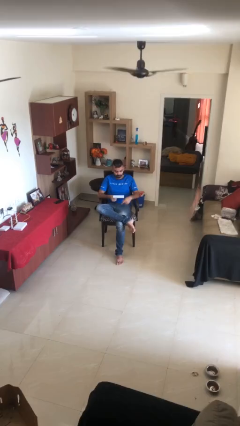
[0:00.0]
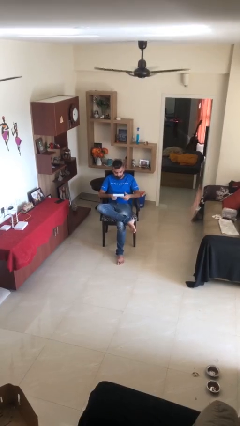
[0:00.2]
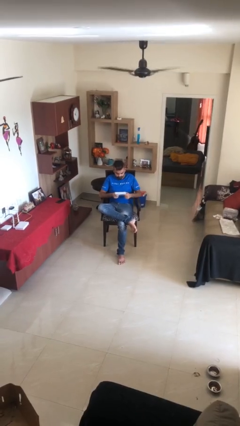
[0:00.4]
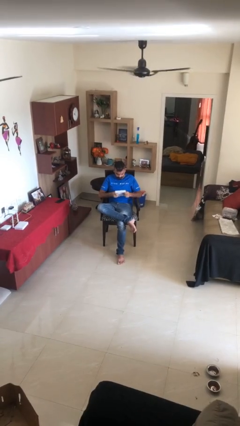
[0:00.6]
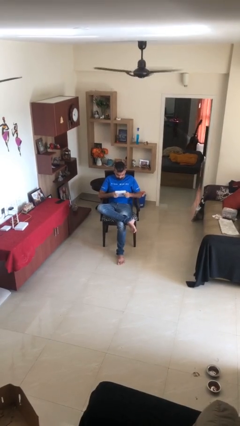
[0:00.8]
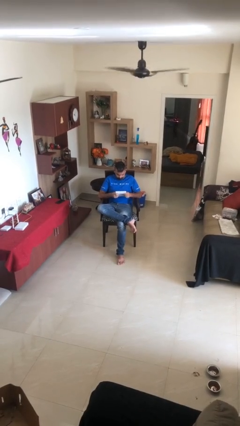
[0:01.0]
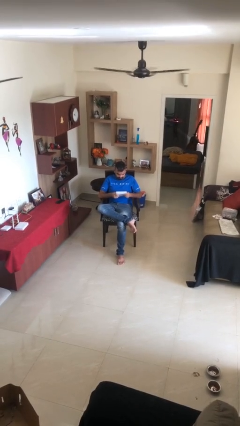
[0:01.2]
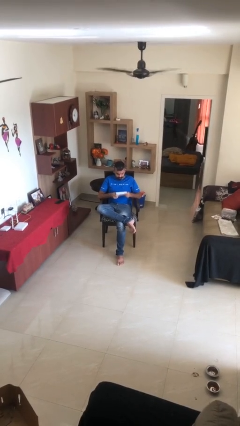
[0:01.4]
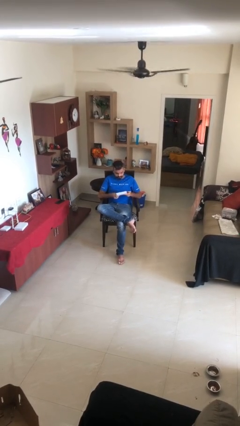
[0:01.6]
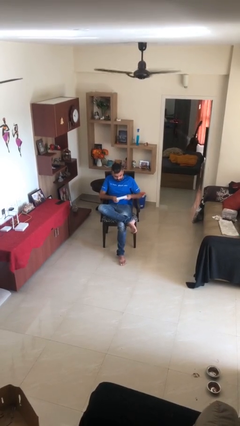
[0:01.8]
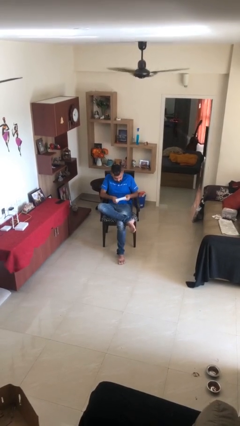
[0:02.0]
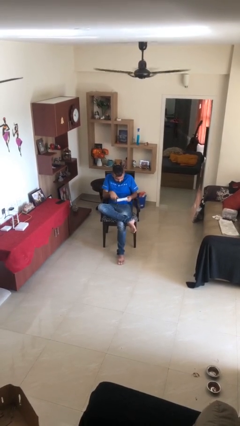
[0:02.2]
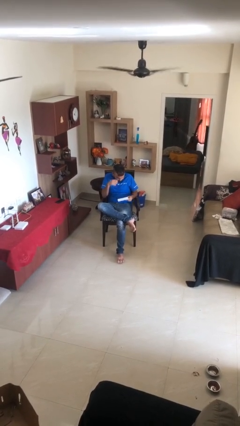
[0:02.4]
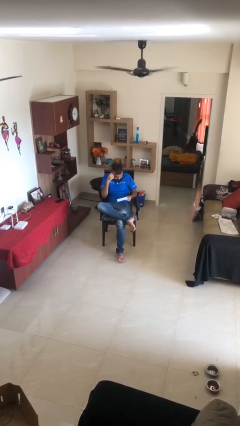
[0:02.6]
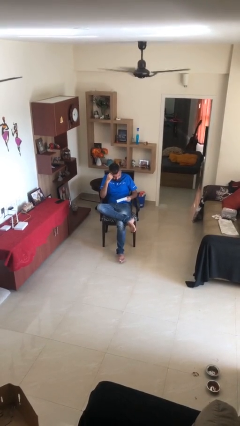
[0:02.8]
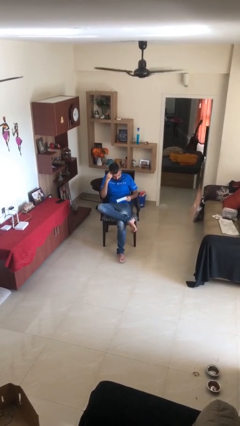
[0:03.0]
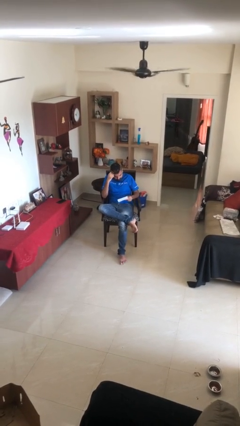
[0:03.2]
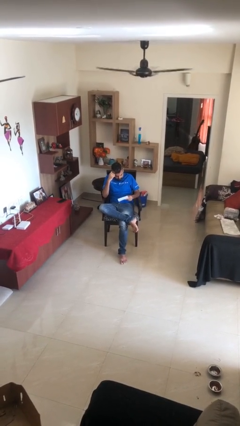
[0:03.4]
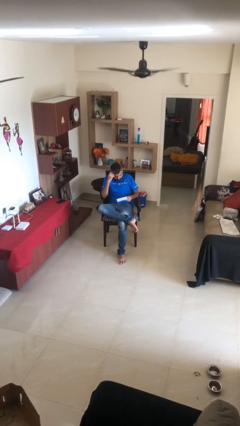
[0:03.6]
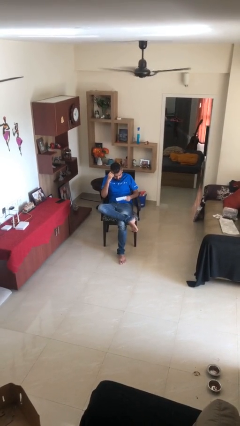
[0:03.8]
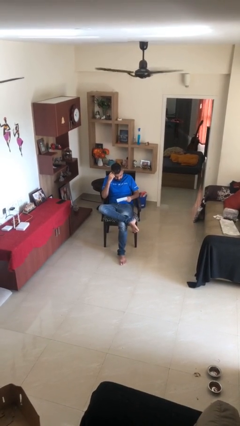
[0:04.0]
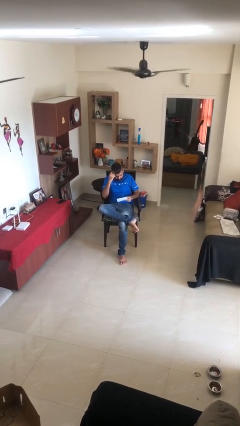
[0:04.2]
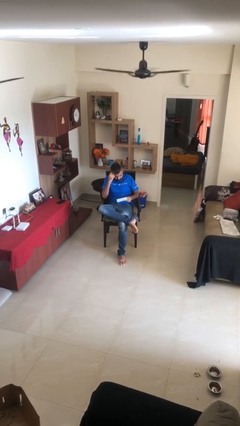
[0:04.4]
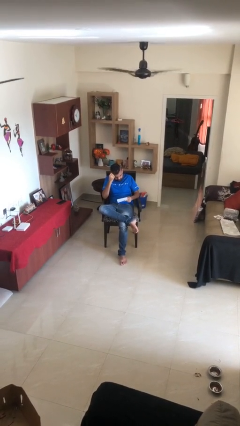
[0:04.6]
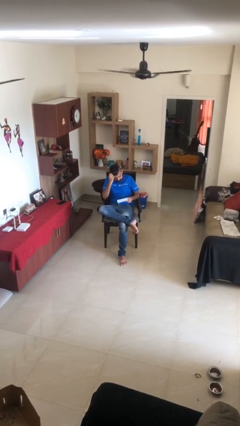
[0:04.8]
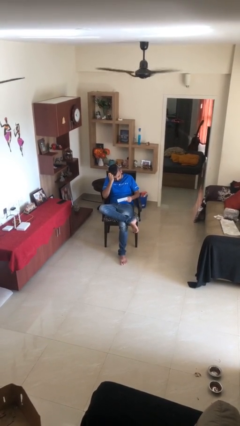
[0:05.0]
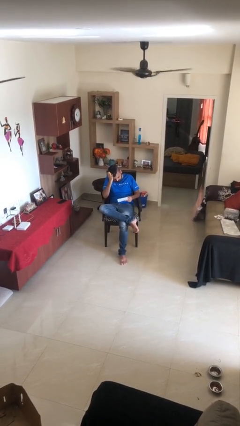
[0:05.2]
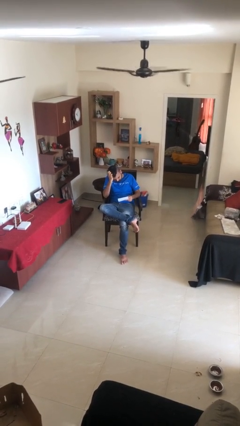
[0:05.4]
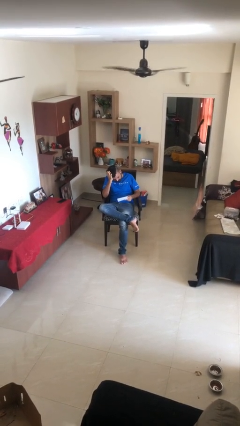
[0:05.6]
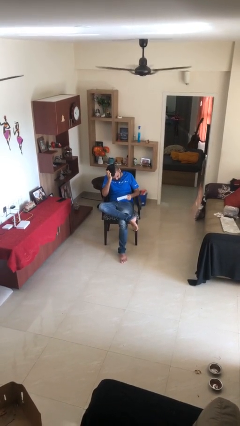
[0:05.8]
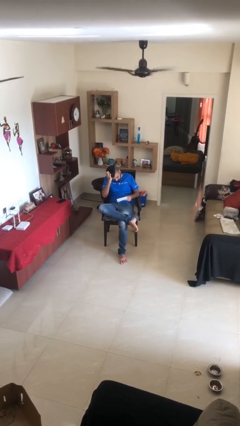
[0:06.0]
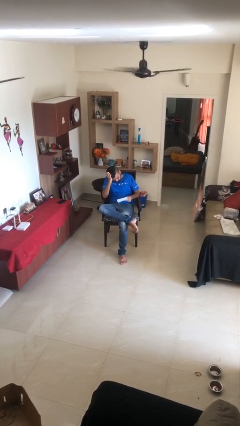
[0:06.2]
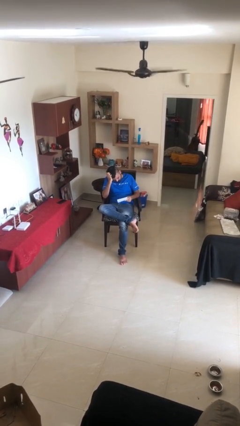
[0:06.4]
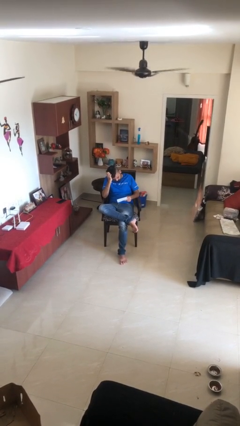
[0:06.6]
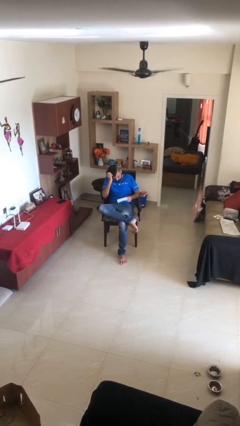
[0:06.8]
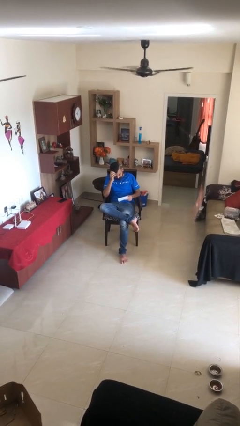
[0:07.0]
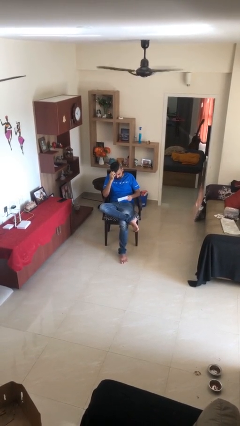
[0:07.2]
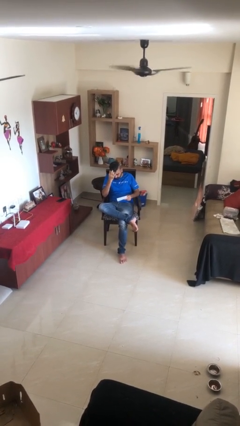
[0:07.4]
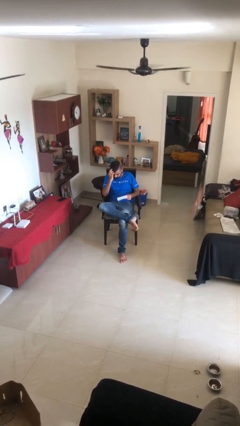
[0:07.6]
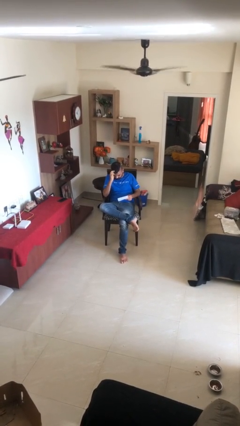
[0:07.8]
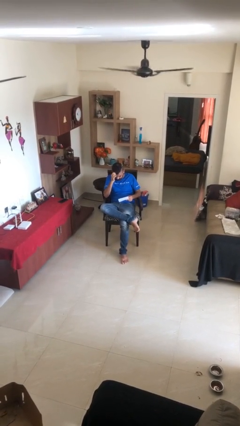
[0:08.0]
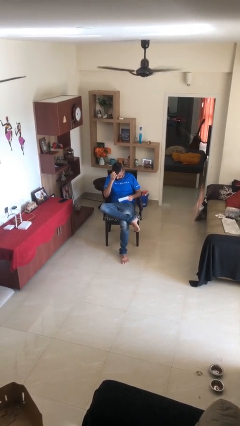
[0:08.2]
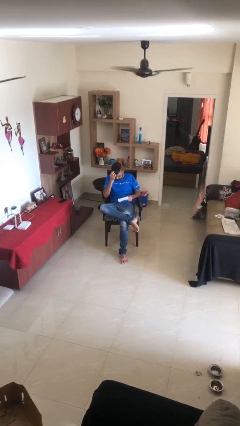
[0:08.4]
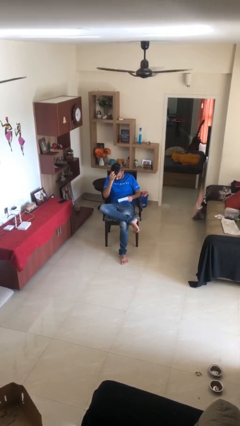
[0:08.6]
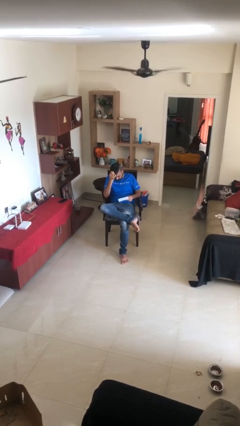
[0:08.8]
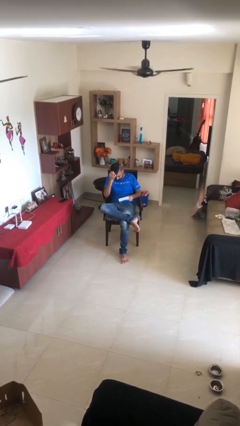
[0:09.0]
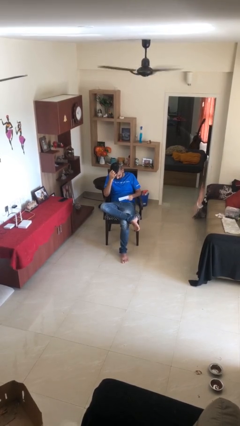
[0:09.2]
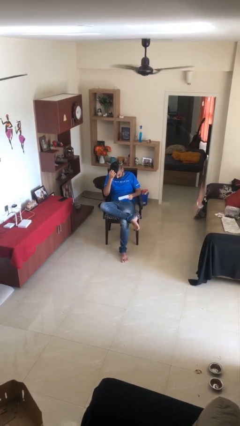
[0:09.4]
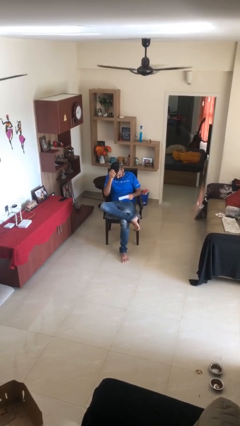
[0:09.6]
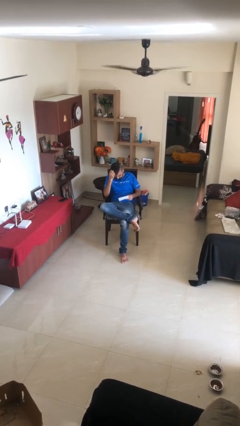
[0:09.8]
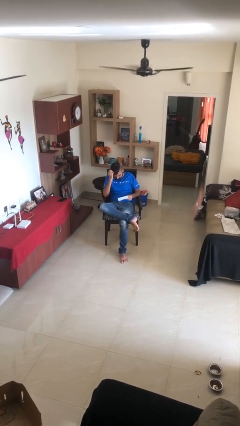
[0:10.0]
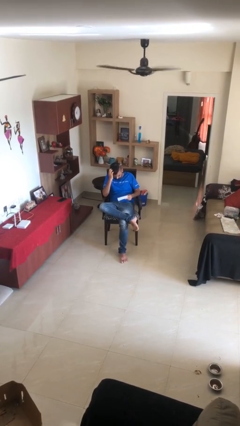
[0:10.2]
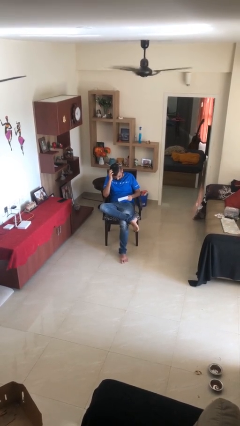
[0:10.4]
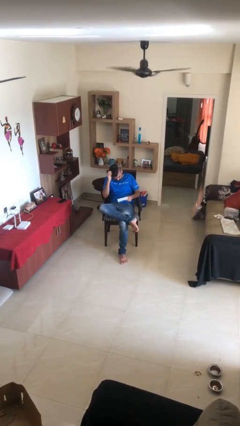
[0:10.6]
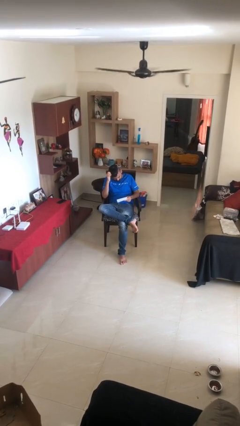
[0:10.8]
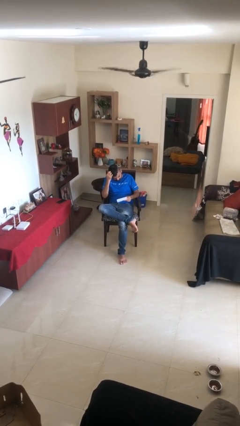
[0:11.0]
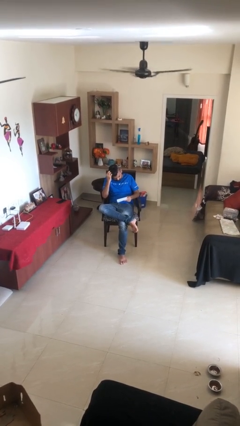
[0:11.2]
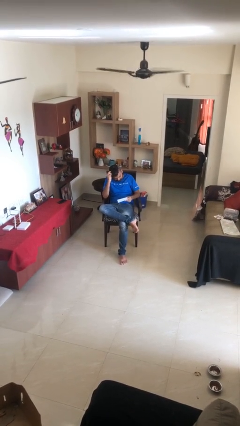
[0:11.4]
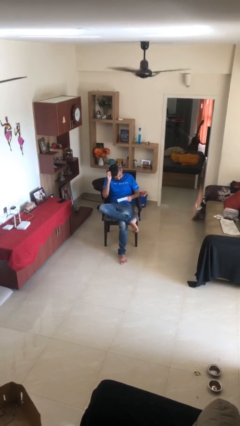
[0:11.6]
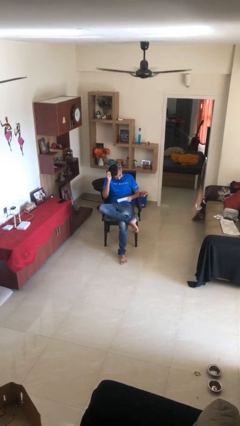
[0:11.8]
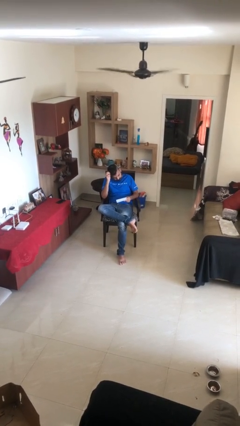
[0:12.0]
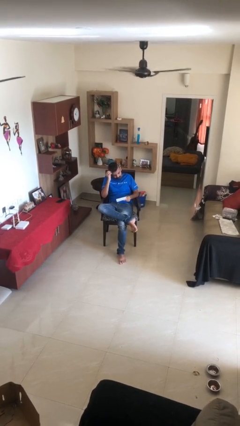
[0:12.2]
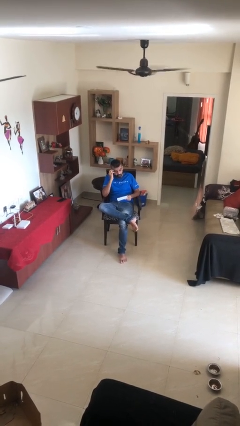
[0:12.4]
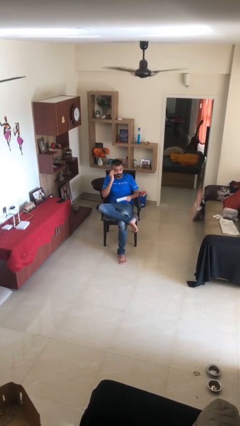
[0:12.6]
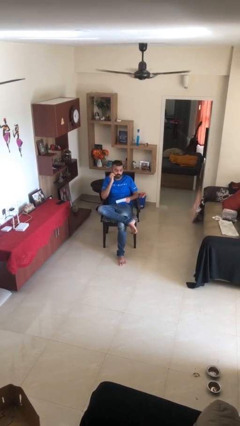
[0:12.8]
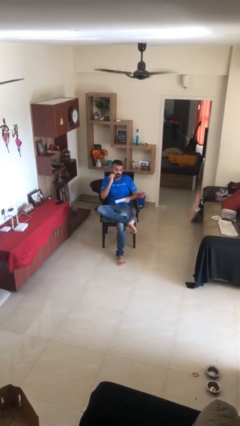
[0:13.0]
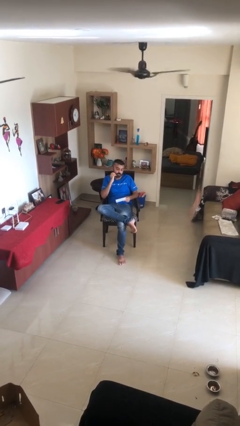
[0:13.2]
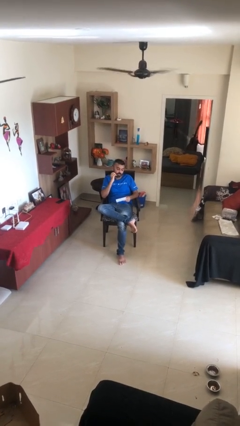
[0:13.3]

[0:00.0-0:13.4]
person reads document

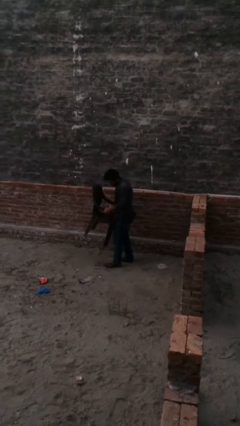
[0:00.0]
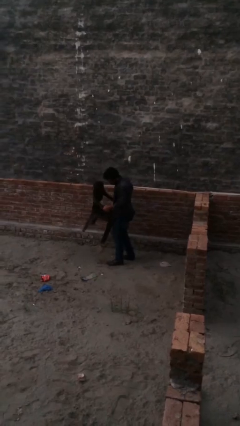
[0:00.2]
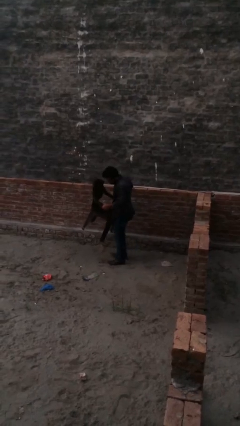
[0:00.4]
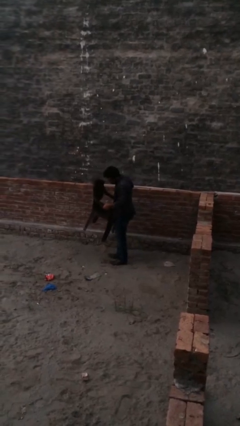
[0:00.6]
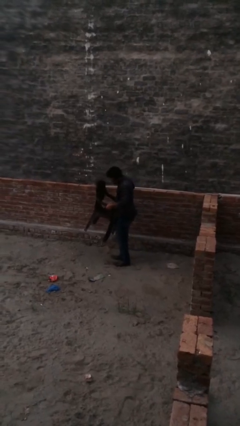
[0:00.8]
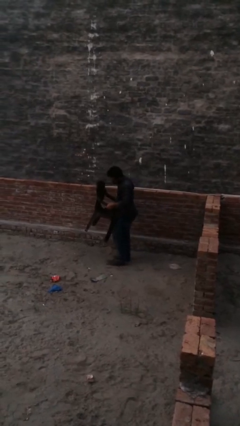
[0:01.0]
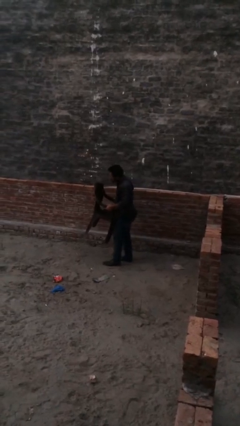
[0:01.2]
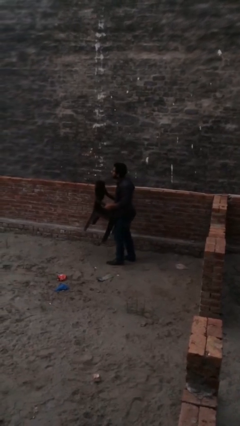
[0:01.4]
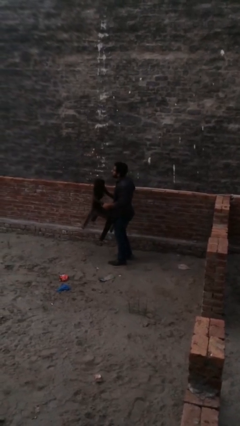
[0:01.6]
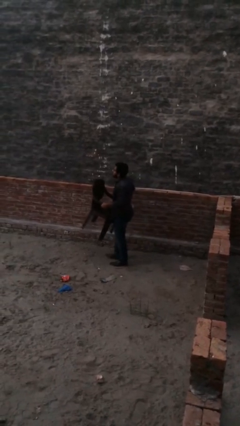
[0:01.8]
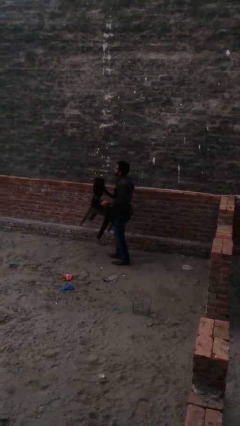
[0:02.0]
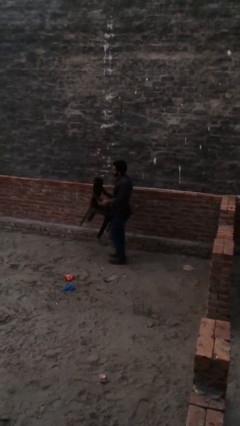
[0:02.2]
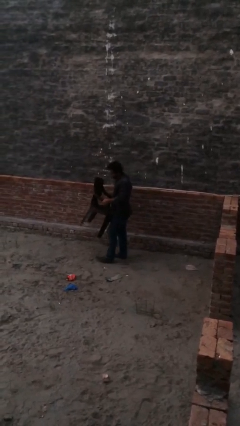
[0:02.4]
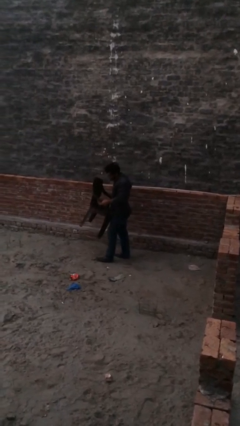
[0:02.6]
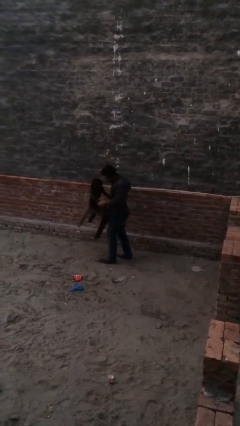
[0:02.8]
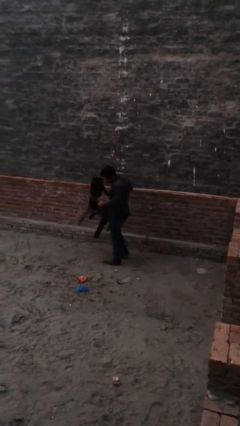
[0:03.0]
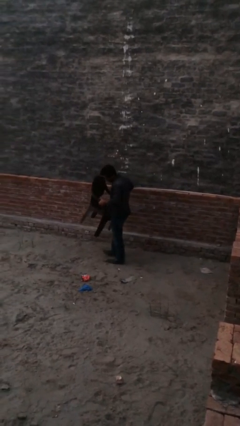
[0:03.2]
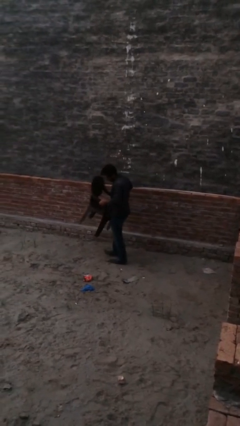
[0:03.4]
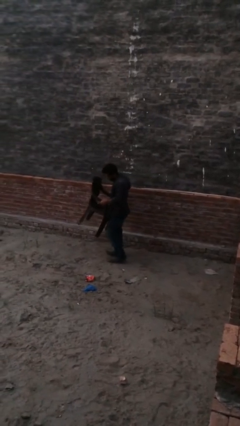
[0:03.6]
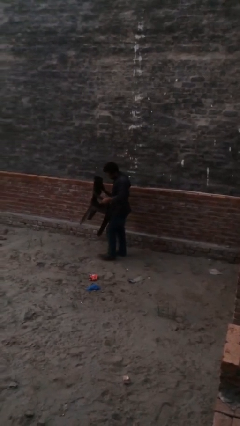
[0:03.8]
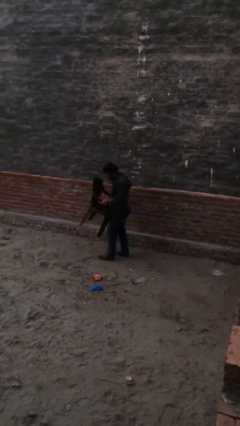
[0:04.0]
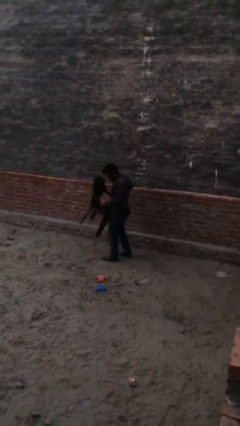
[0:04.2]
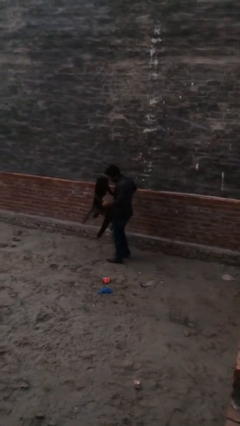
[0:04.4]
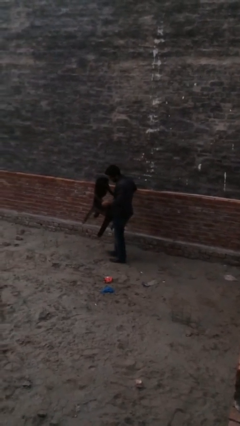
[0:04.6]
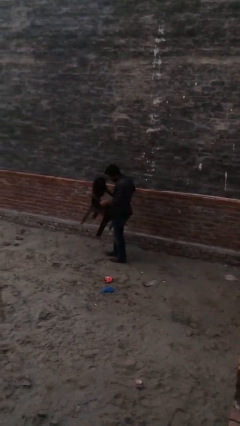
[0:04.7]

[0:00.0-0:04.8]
person carries heavy object
